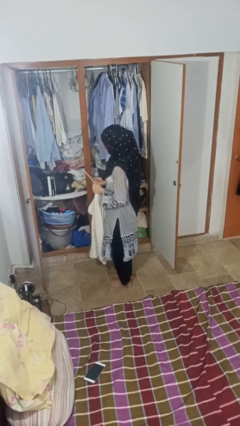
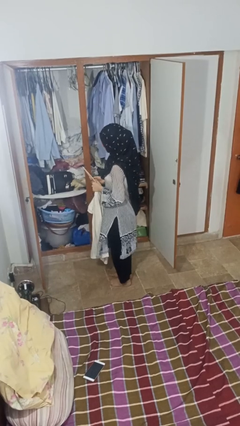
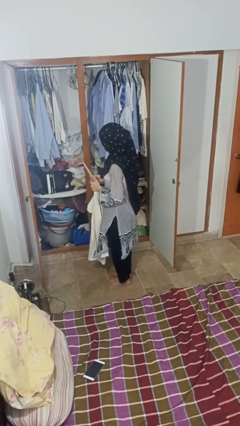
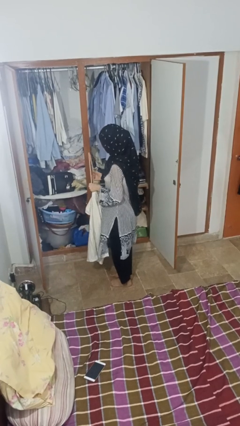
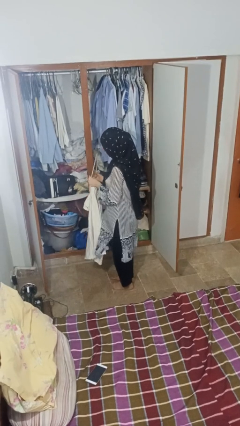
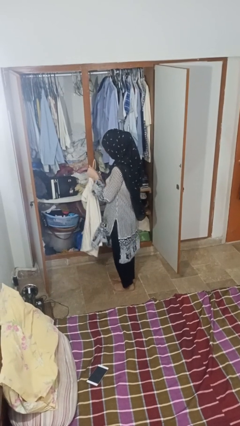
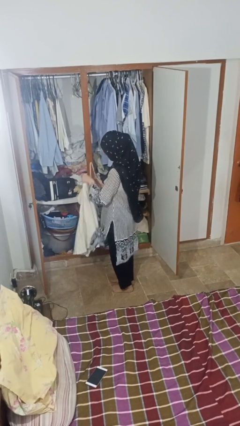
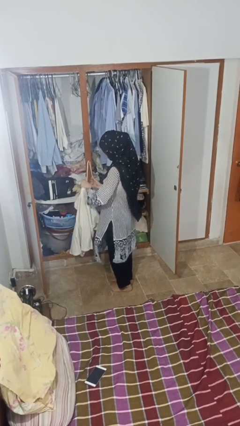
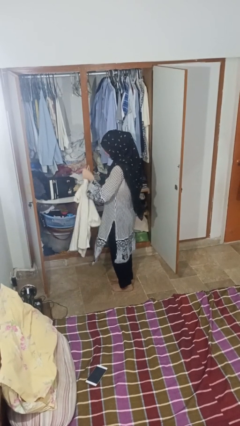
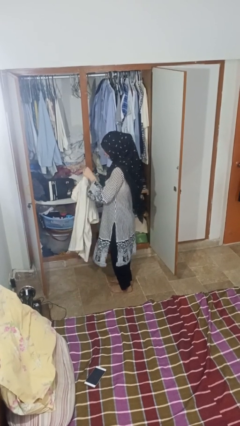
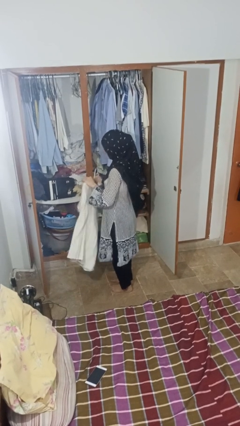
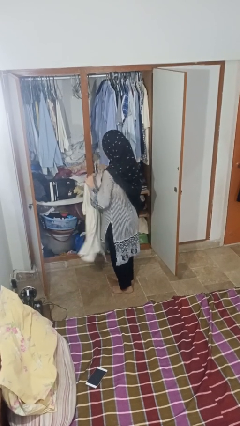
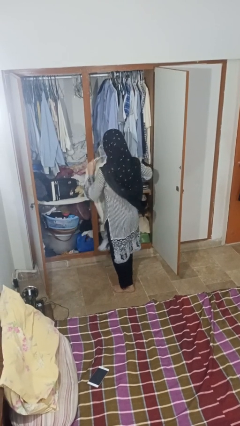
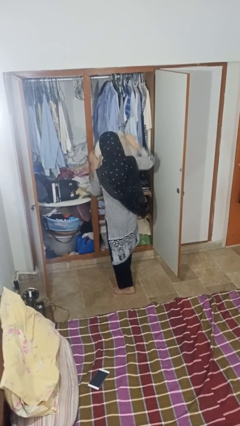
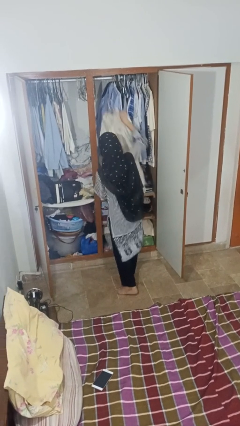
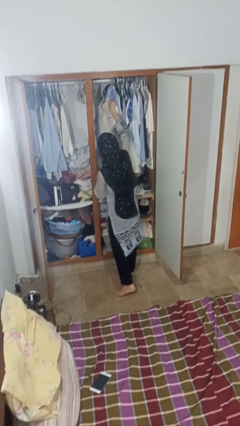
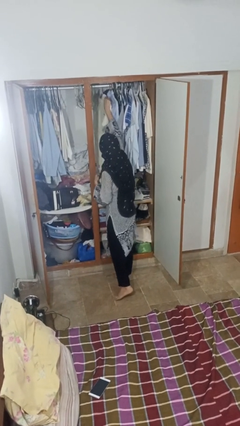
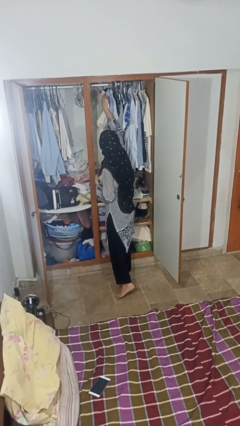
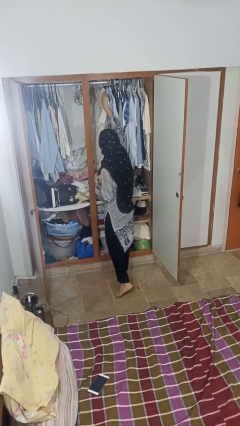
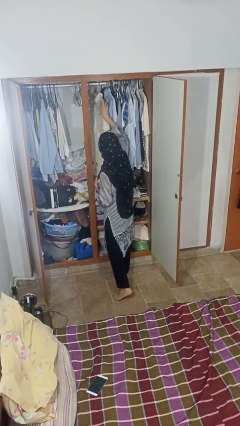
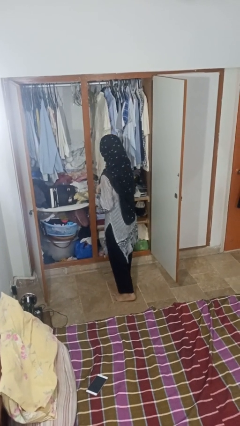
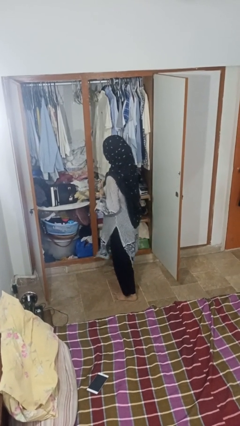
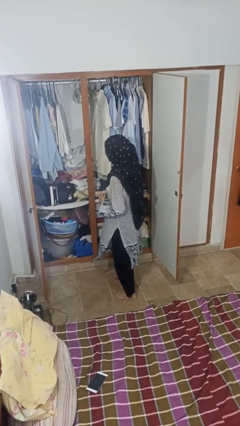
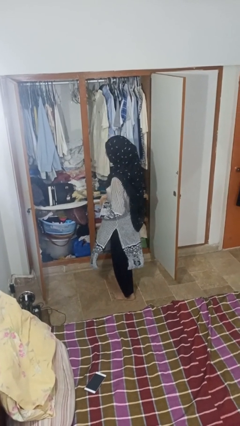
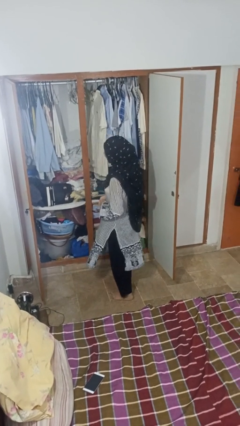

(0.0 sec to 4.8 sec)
person puts clothes into closet

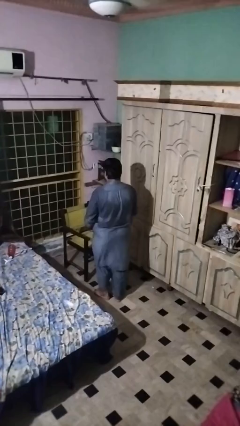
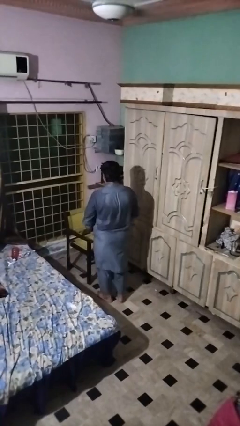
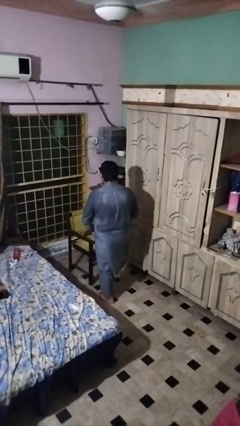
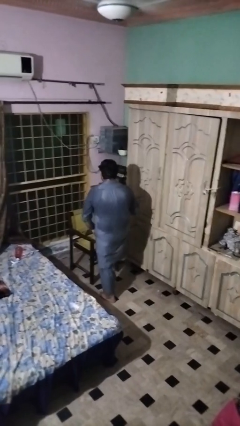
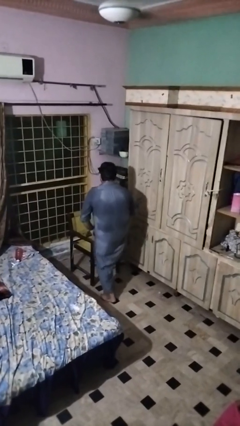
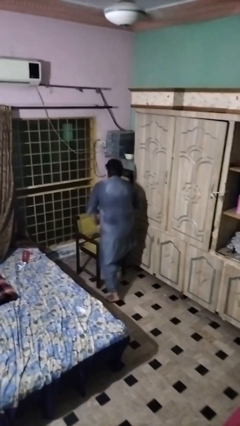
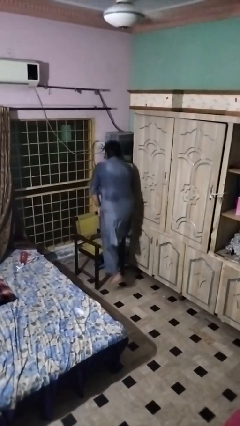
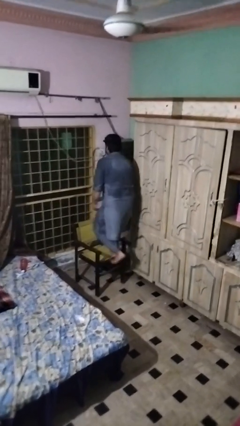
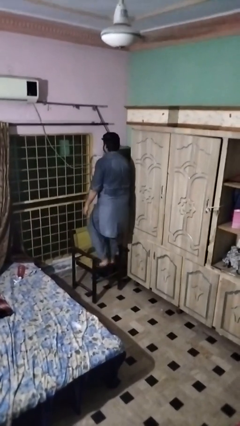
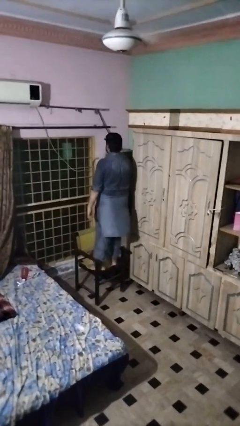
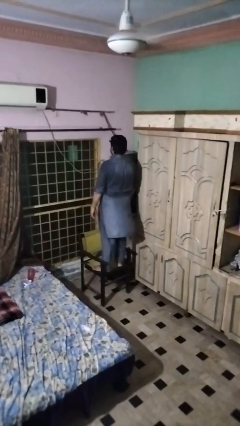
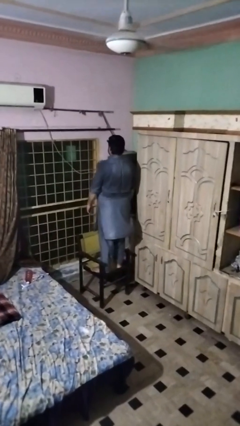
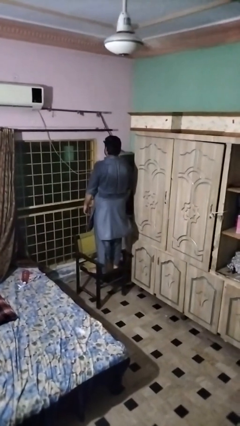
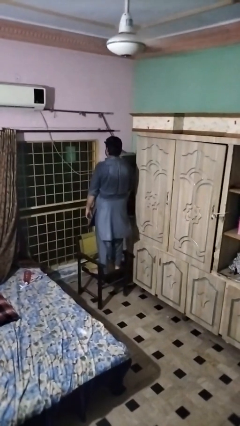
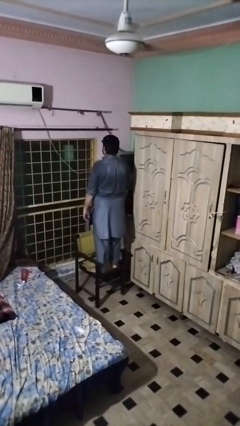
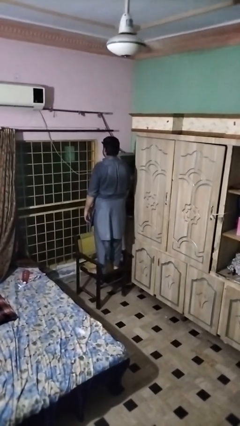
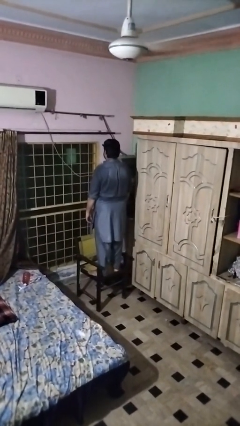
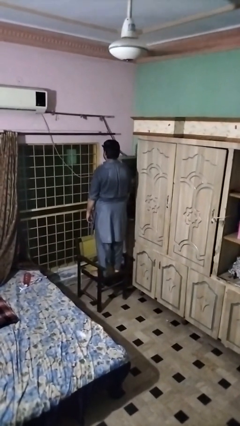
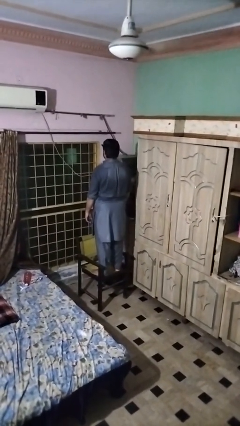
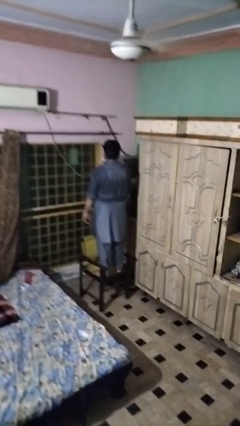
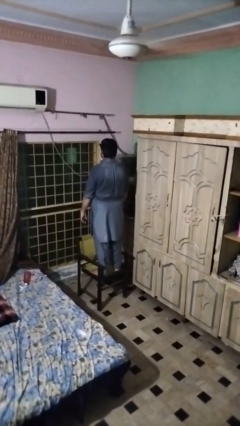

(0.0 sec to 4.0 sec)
person climbs on chair

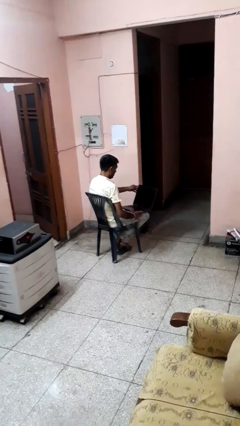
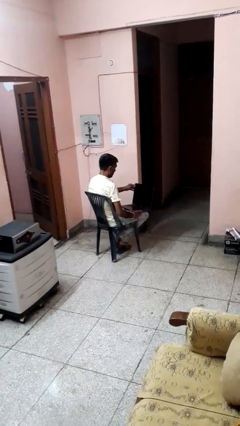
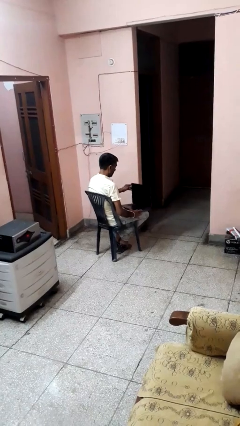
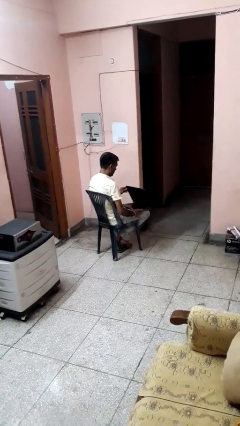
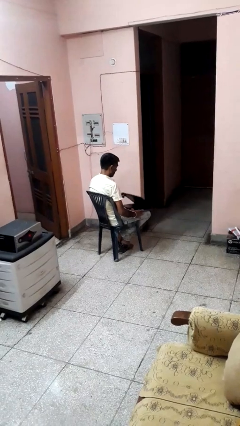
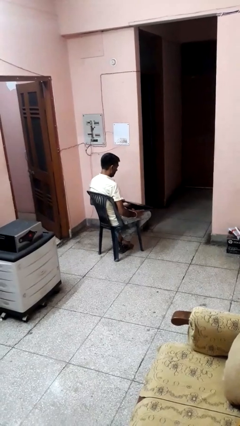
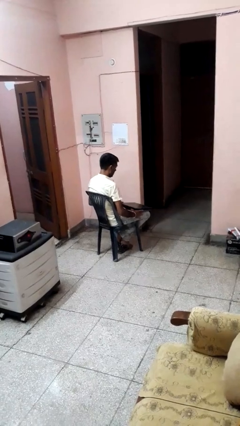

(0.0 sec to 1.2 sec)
person closes laptop

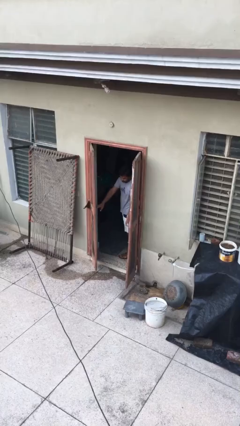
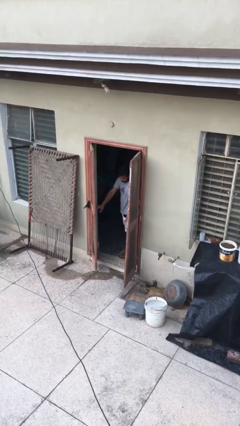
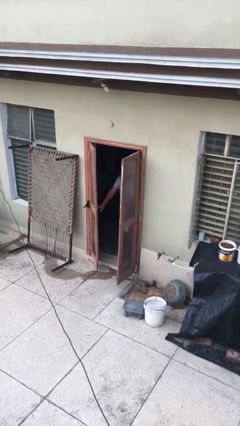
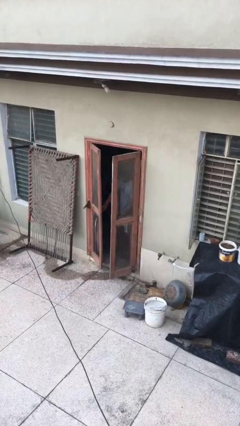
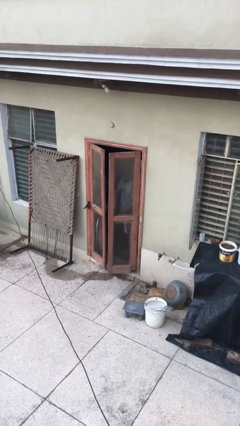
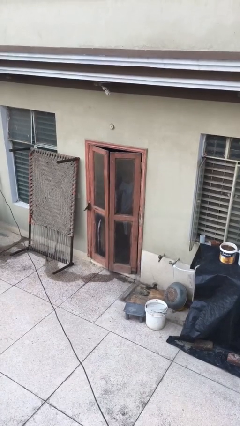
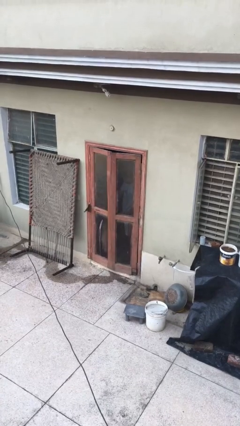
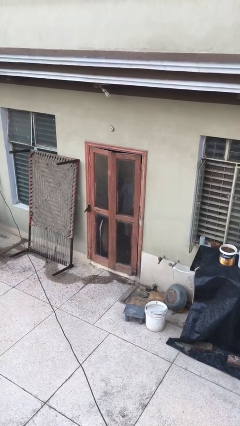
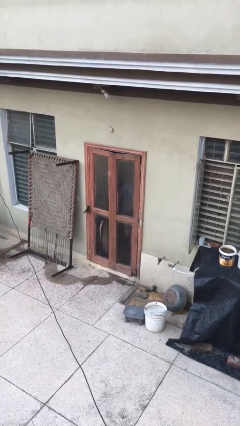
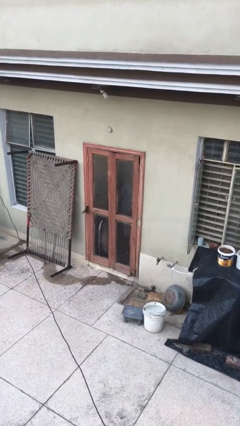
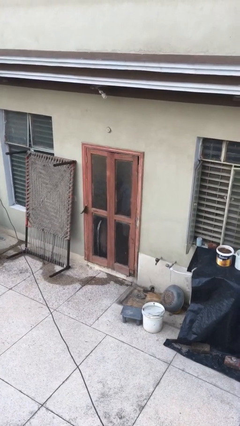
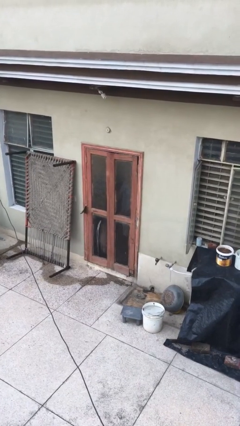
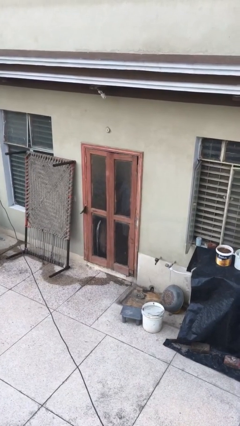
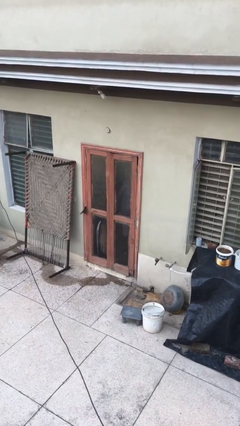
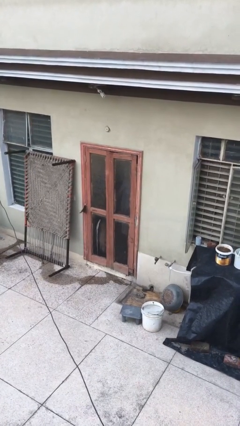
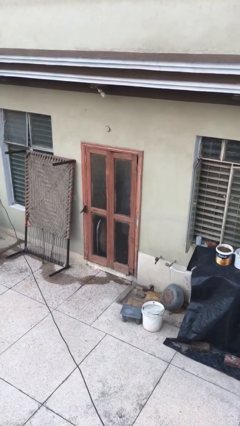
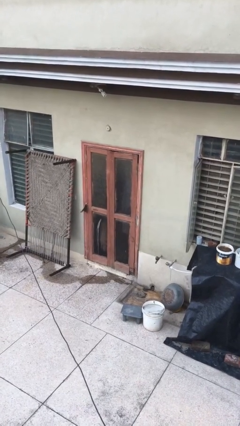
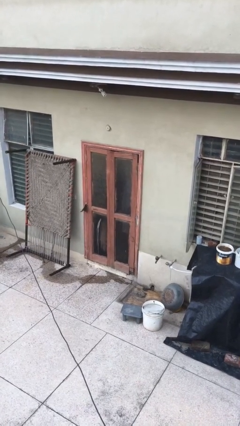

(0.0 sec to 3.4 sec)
person closes facility door

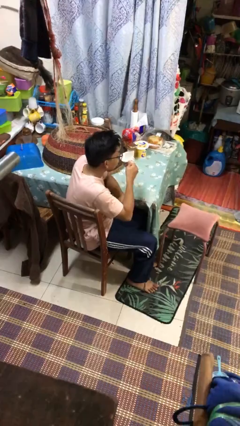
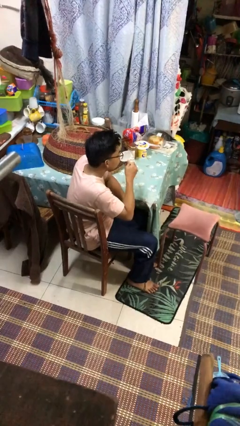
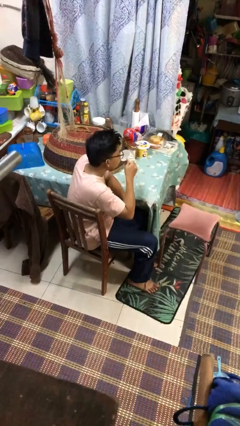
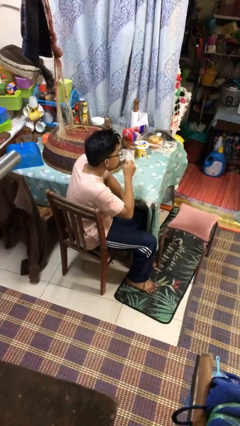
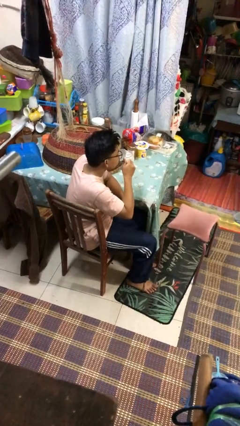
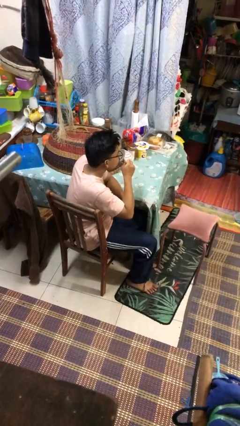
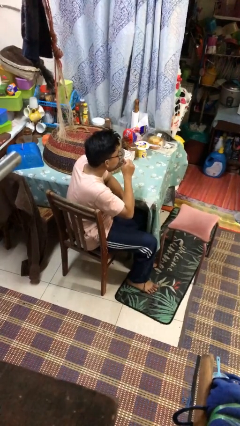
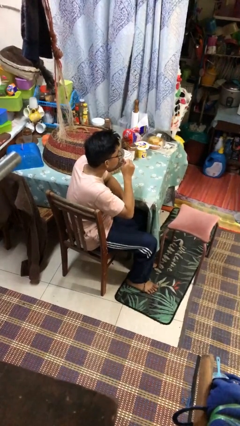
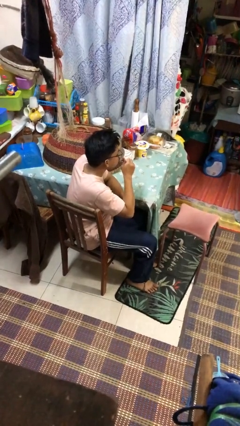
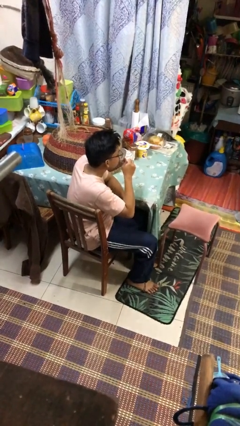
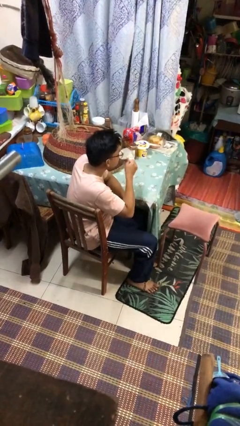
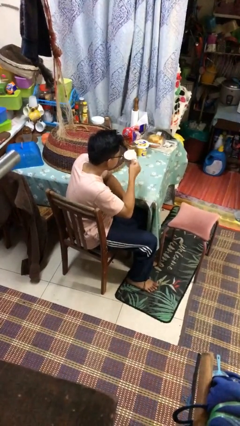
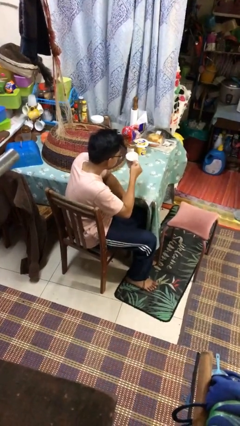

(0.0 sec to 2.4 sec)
person drinks from mug

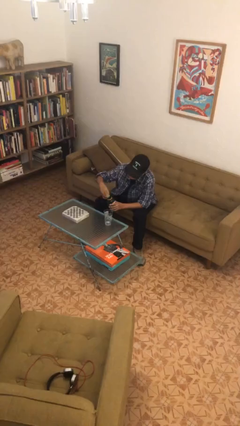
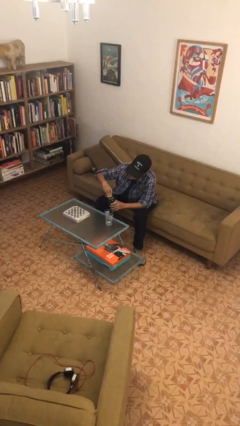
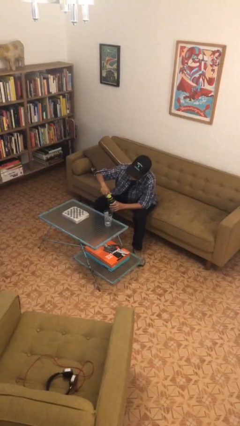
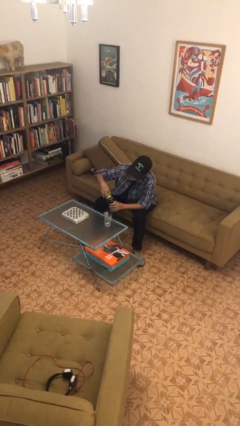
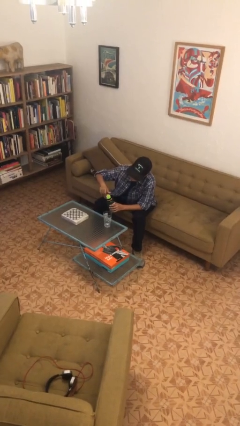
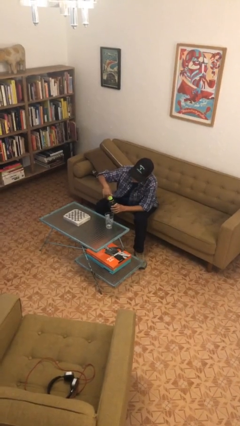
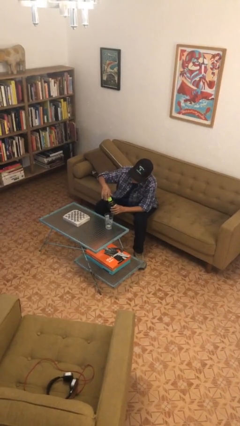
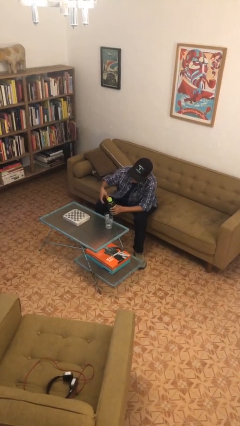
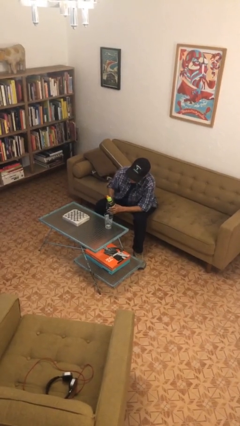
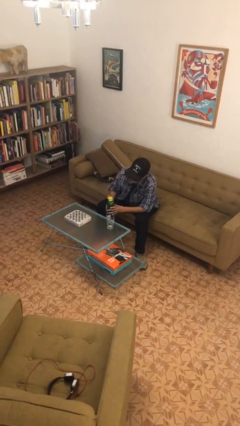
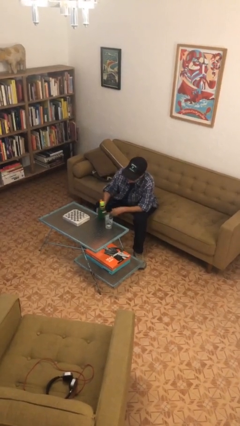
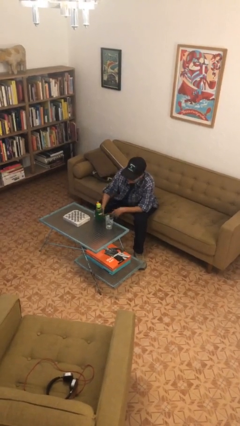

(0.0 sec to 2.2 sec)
person screws lid to bottle
